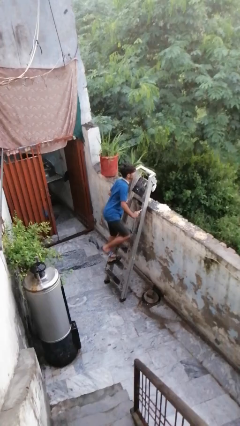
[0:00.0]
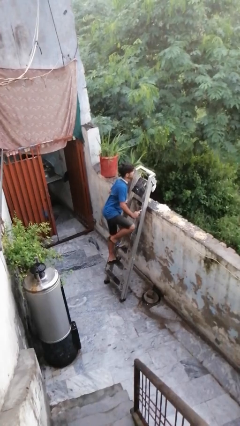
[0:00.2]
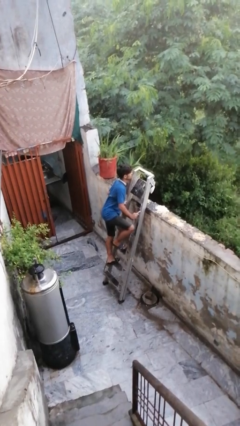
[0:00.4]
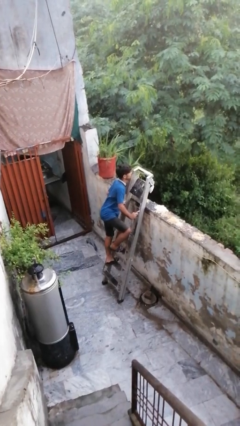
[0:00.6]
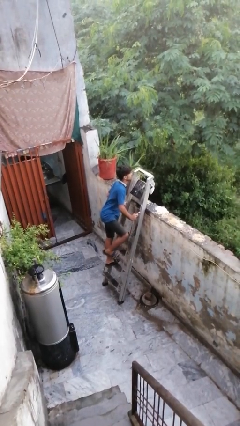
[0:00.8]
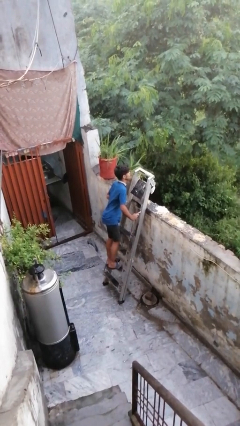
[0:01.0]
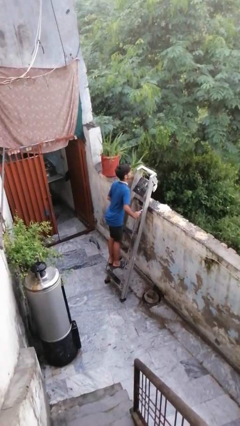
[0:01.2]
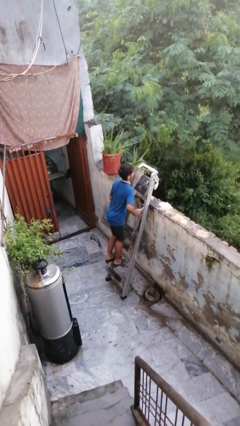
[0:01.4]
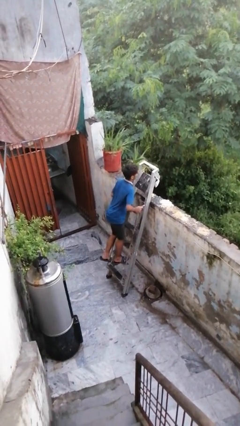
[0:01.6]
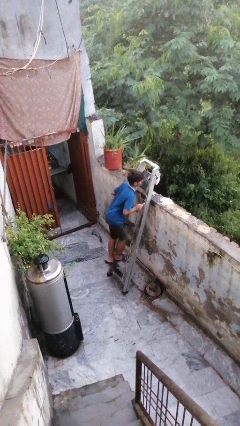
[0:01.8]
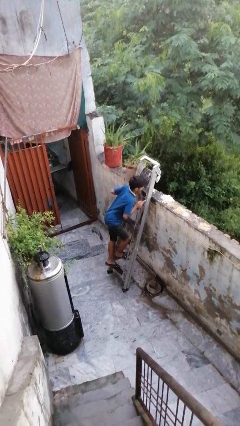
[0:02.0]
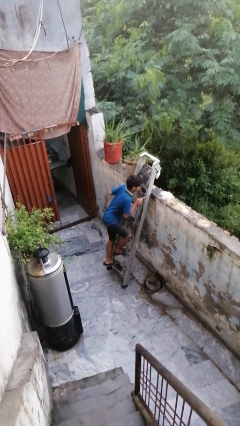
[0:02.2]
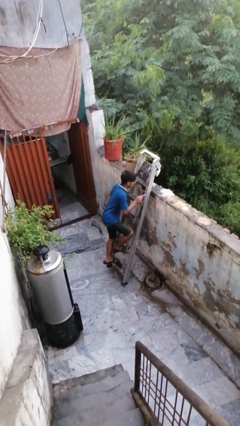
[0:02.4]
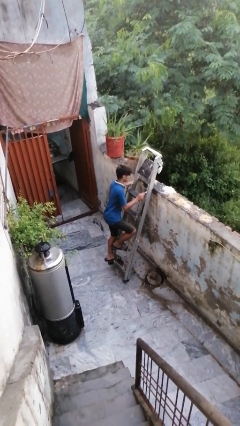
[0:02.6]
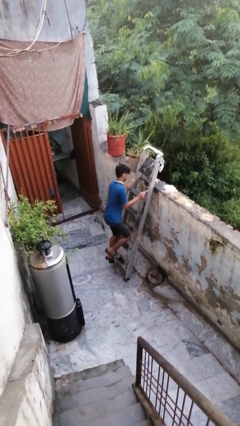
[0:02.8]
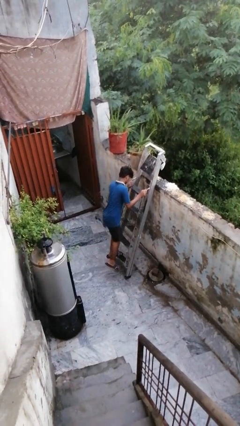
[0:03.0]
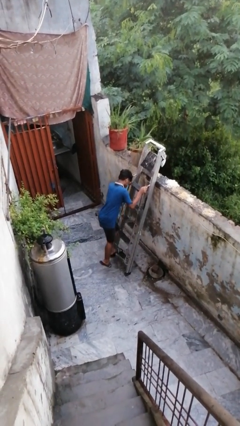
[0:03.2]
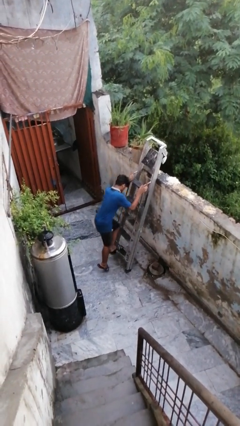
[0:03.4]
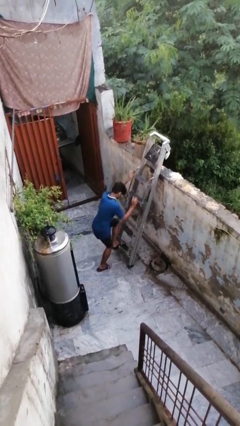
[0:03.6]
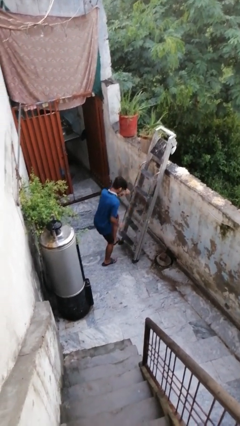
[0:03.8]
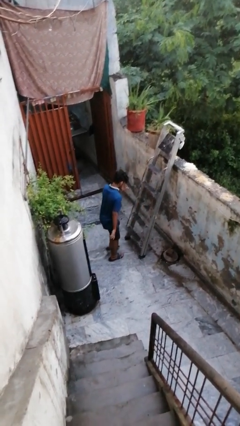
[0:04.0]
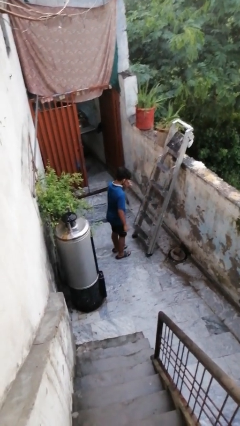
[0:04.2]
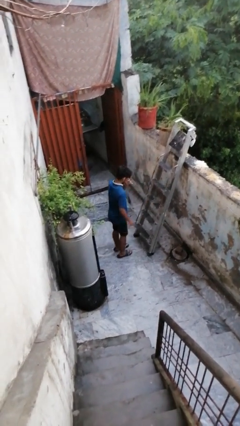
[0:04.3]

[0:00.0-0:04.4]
person climbs down ladder

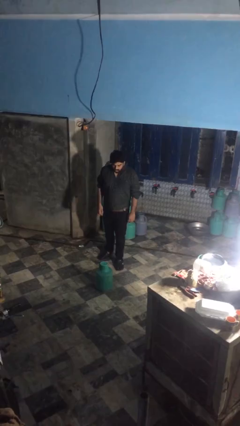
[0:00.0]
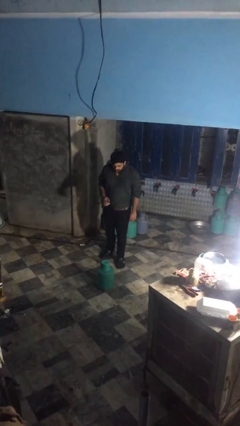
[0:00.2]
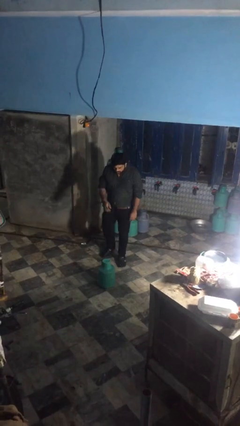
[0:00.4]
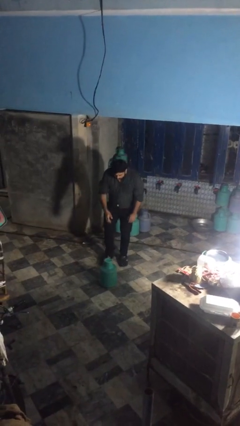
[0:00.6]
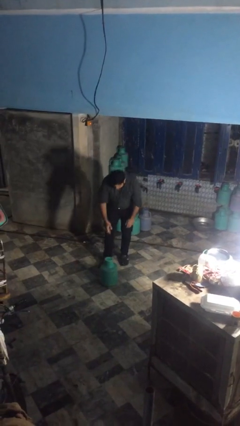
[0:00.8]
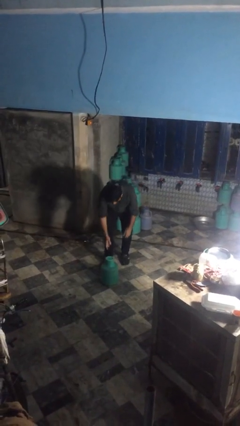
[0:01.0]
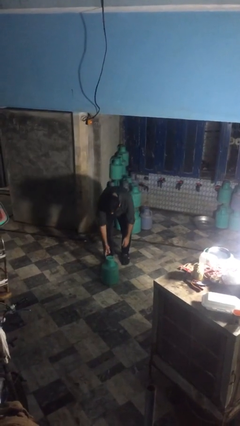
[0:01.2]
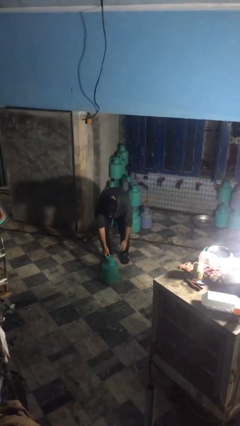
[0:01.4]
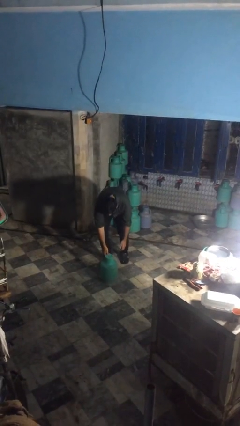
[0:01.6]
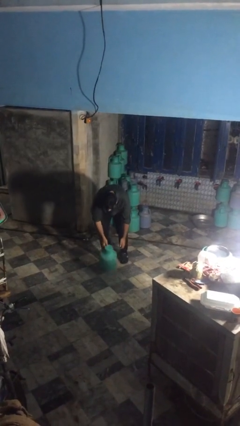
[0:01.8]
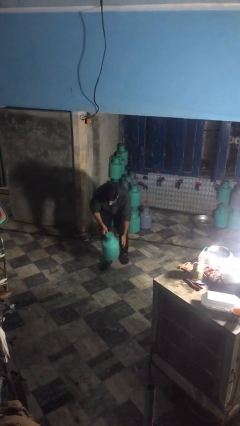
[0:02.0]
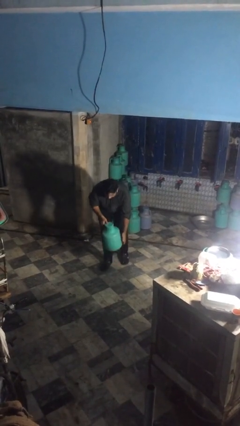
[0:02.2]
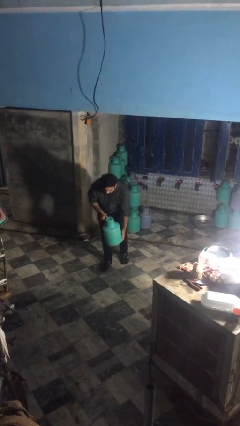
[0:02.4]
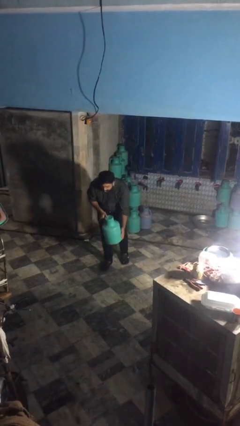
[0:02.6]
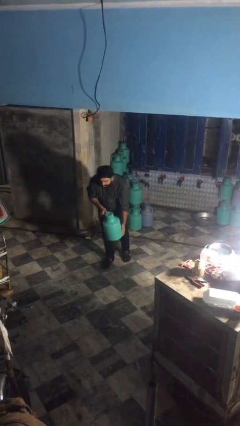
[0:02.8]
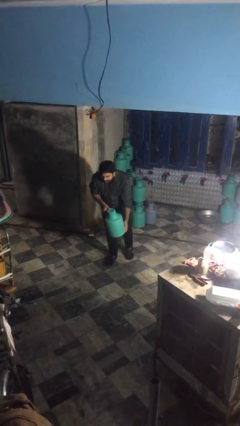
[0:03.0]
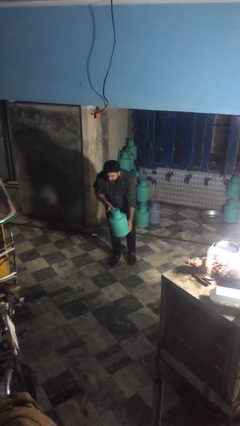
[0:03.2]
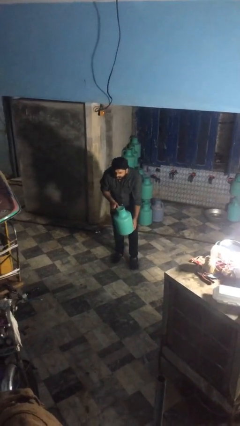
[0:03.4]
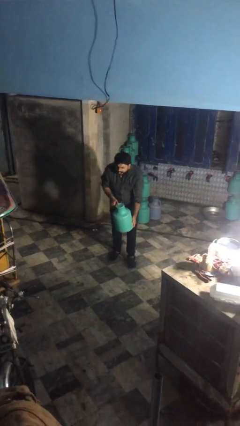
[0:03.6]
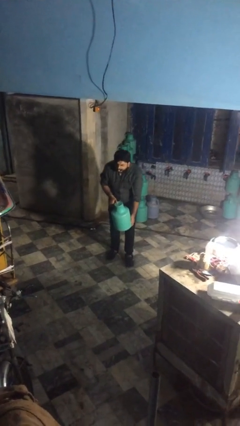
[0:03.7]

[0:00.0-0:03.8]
person picks up object from floor

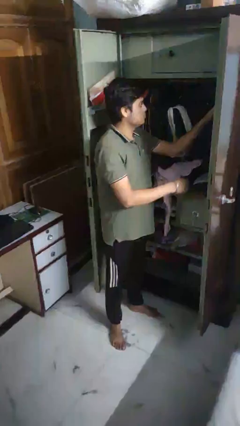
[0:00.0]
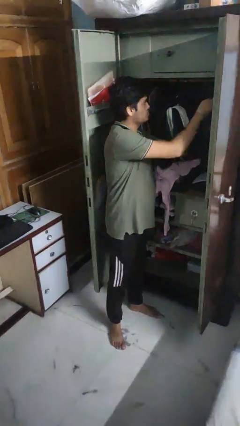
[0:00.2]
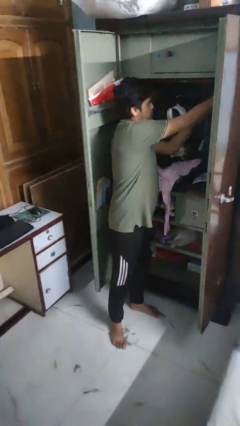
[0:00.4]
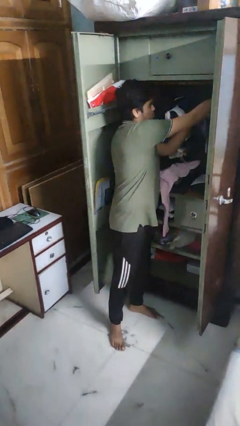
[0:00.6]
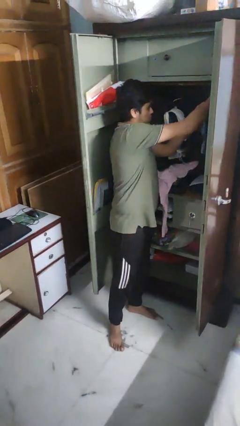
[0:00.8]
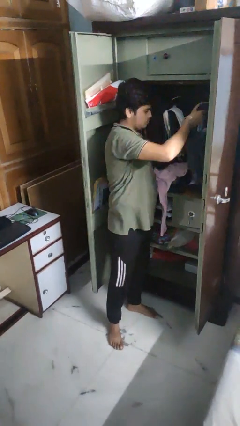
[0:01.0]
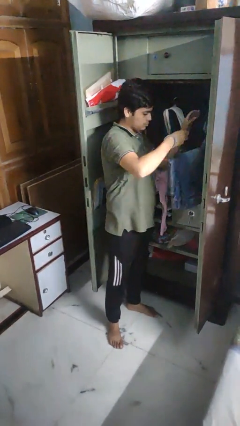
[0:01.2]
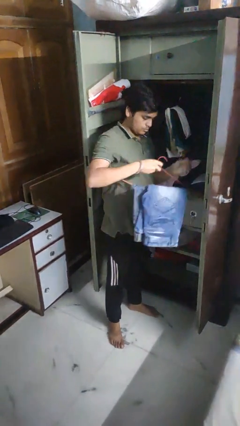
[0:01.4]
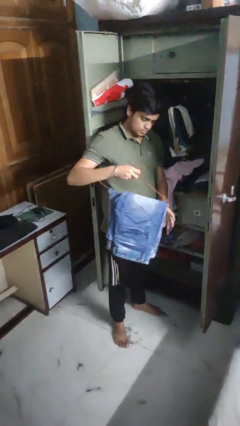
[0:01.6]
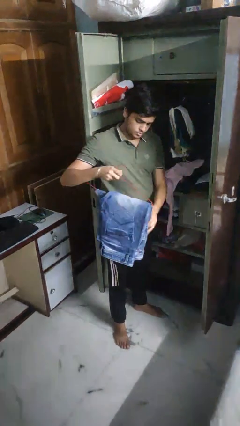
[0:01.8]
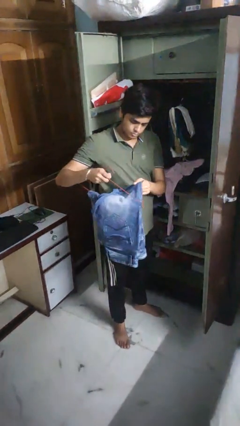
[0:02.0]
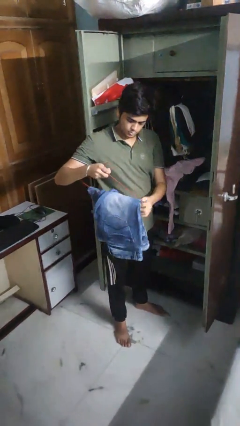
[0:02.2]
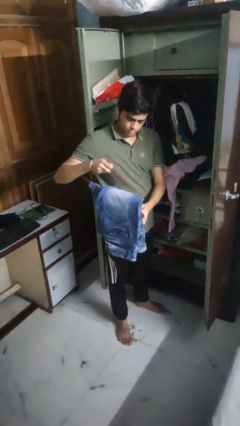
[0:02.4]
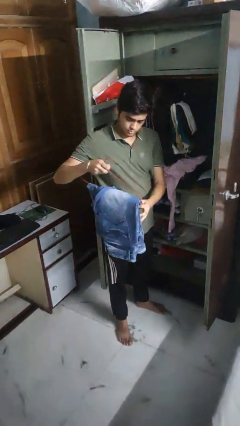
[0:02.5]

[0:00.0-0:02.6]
person takes clothes from closet

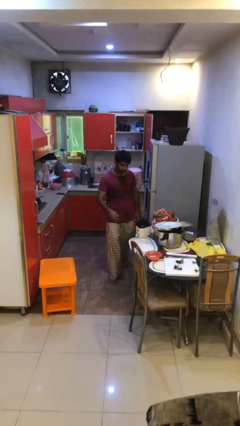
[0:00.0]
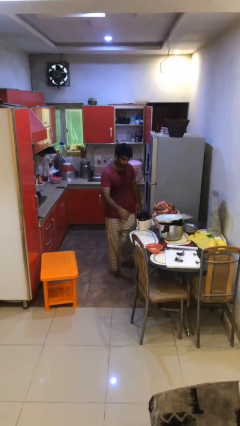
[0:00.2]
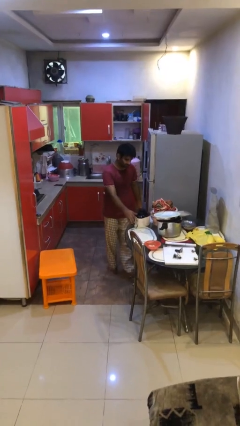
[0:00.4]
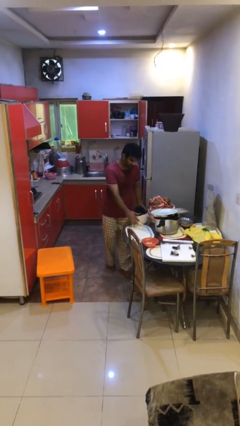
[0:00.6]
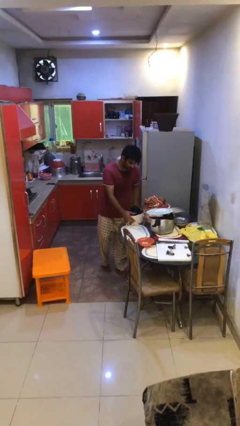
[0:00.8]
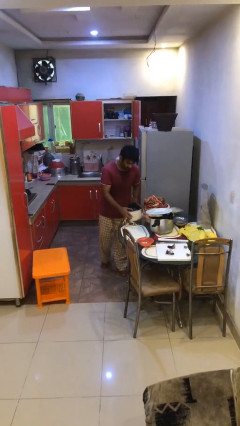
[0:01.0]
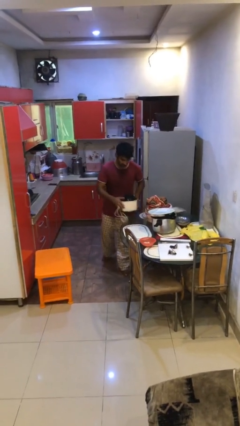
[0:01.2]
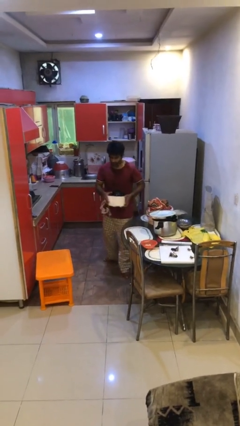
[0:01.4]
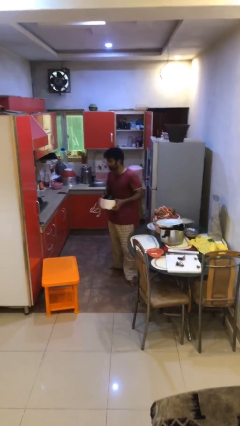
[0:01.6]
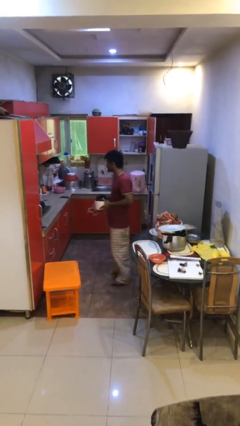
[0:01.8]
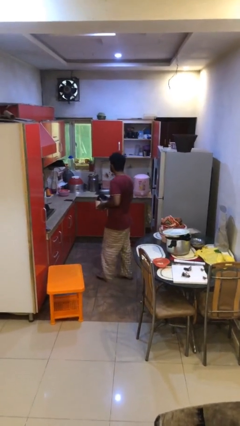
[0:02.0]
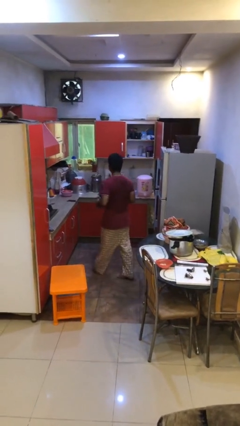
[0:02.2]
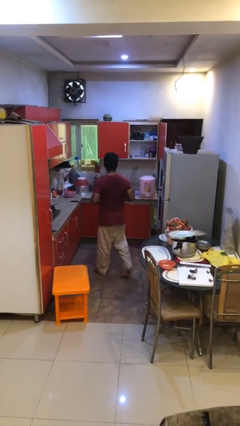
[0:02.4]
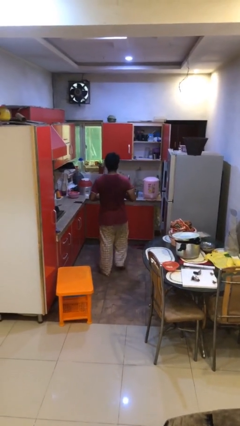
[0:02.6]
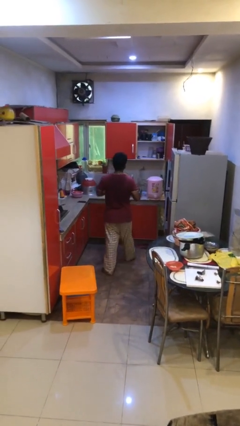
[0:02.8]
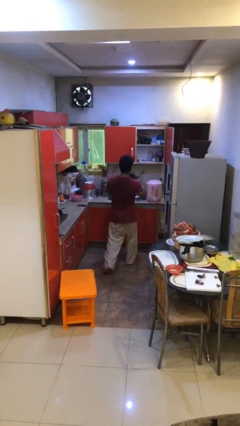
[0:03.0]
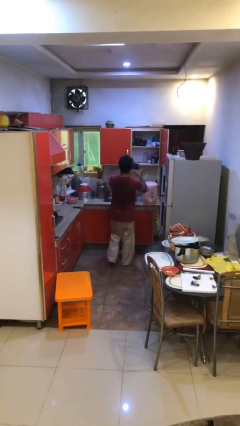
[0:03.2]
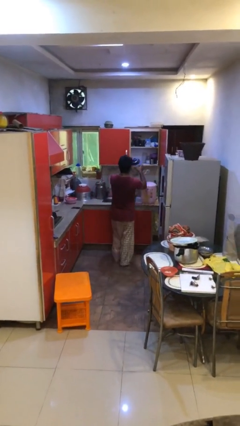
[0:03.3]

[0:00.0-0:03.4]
person picks up object from table
